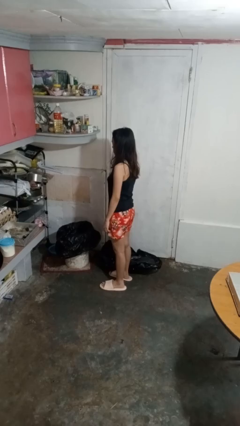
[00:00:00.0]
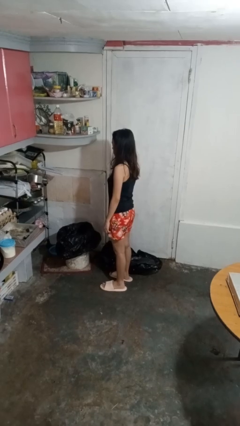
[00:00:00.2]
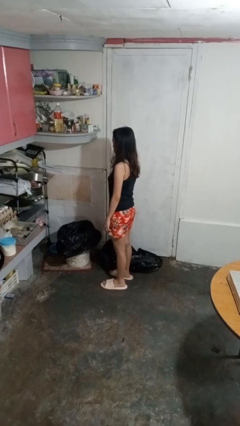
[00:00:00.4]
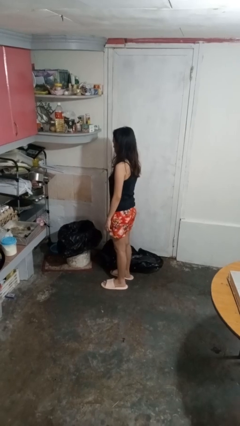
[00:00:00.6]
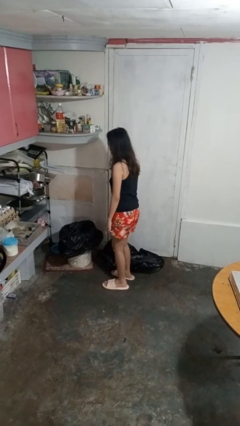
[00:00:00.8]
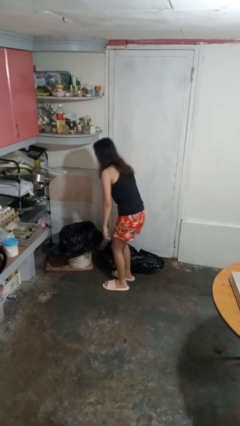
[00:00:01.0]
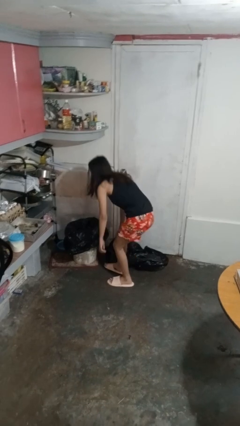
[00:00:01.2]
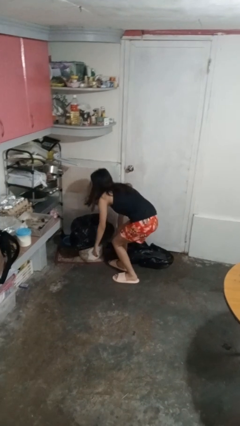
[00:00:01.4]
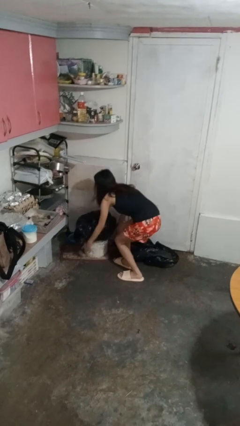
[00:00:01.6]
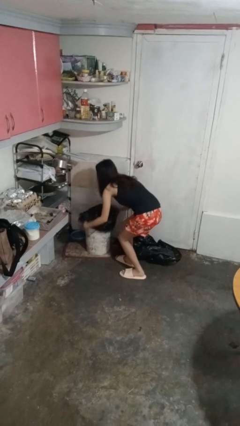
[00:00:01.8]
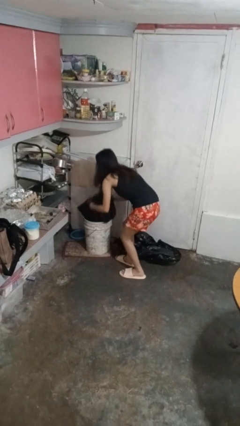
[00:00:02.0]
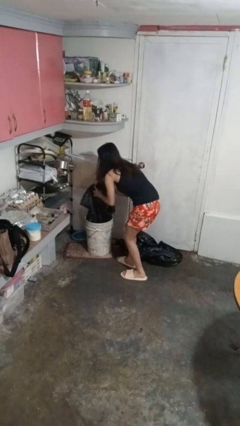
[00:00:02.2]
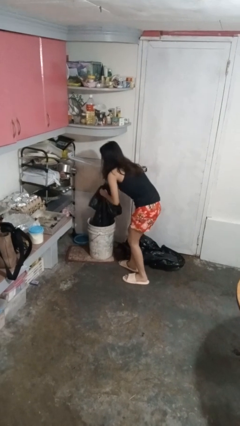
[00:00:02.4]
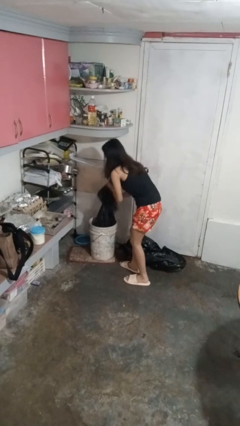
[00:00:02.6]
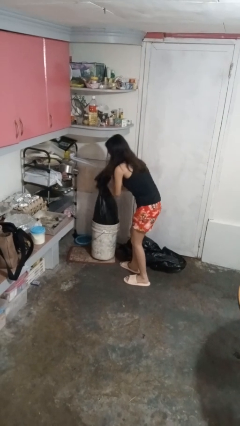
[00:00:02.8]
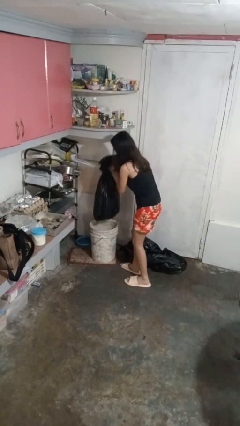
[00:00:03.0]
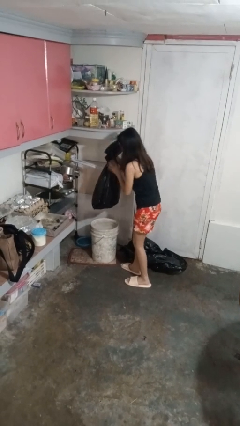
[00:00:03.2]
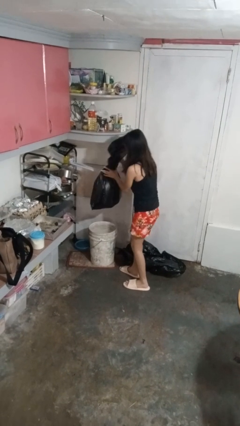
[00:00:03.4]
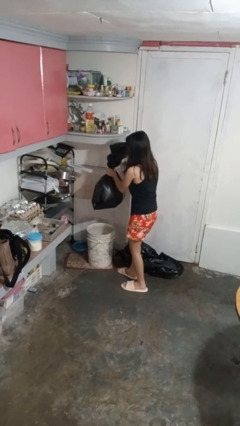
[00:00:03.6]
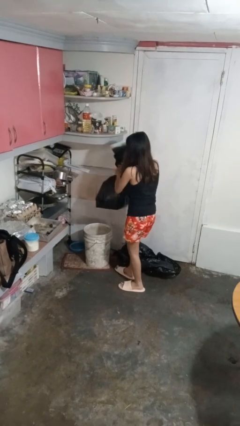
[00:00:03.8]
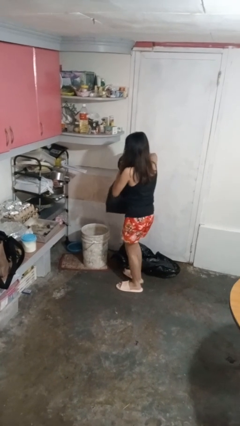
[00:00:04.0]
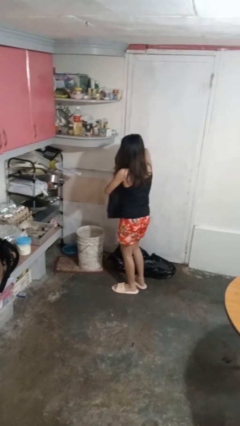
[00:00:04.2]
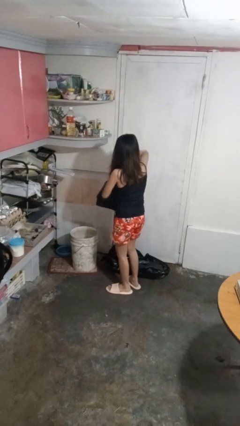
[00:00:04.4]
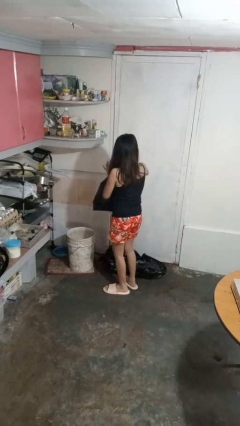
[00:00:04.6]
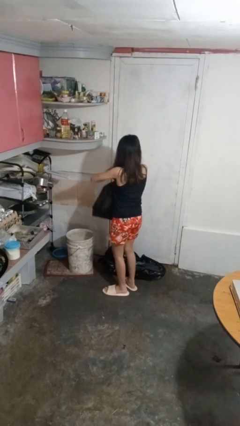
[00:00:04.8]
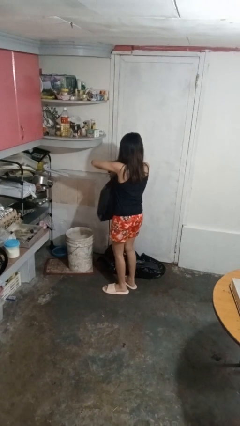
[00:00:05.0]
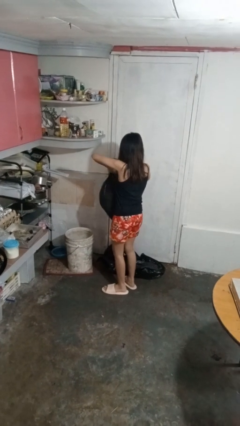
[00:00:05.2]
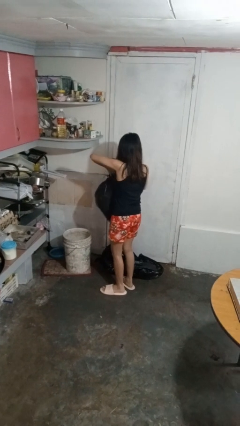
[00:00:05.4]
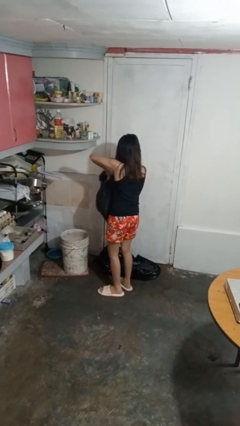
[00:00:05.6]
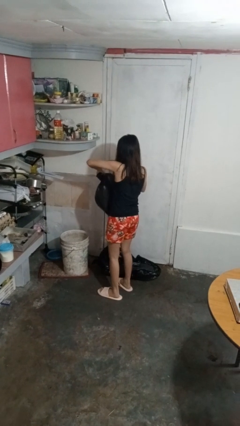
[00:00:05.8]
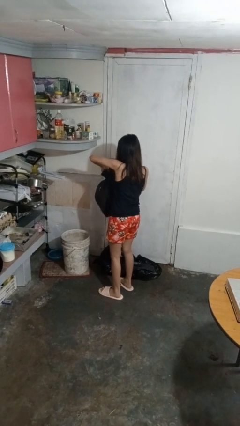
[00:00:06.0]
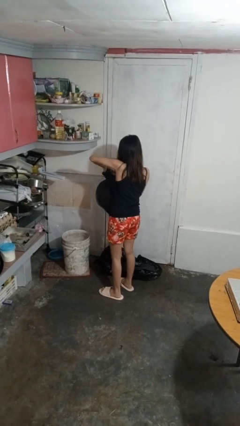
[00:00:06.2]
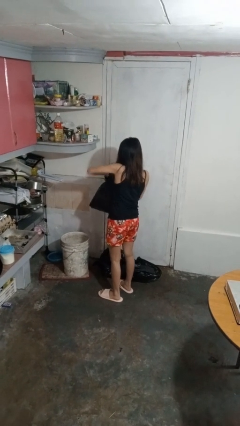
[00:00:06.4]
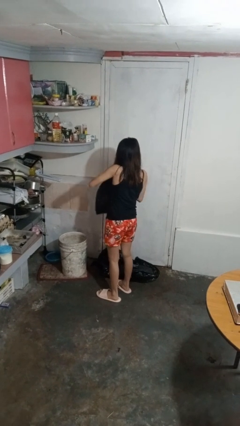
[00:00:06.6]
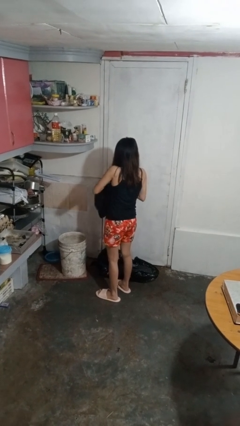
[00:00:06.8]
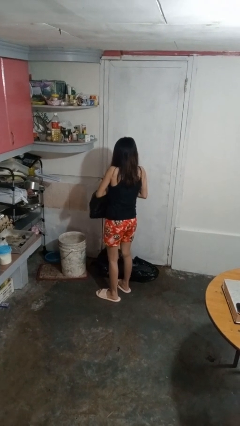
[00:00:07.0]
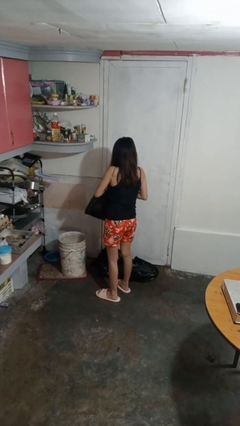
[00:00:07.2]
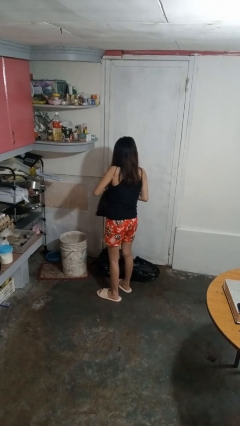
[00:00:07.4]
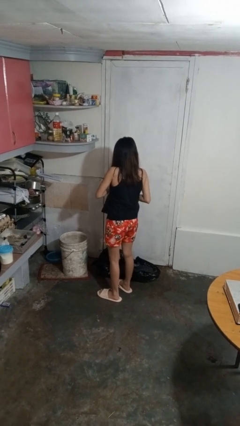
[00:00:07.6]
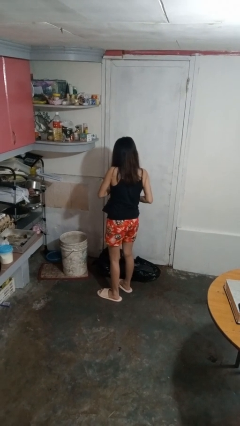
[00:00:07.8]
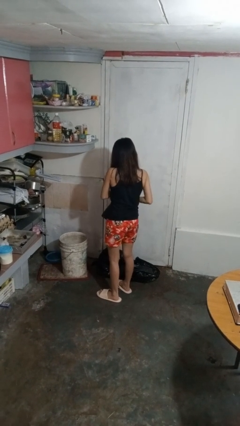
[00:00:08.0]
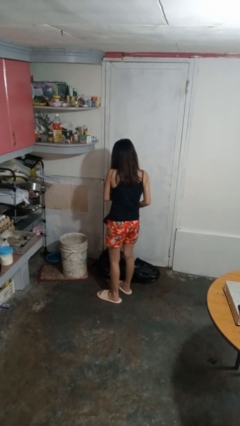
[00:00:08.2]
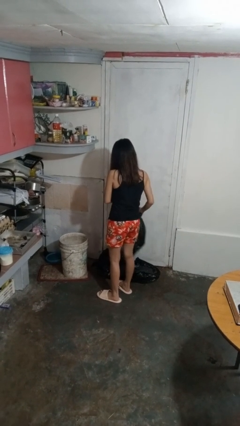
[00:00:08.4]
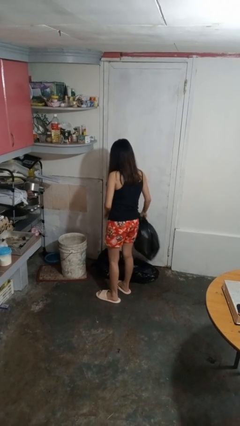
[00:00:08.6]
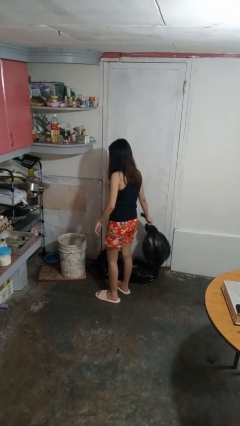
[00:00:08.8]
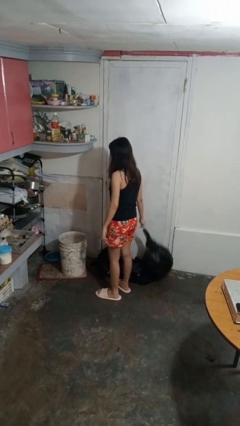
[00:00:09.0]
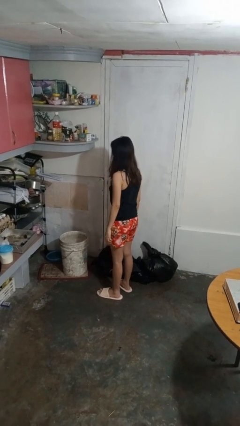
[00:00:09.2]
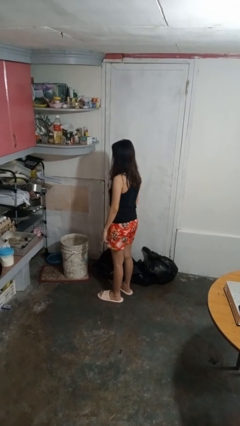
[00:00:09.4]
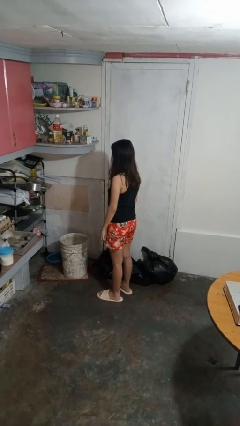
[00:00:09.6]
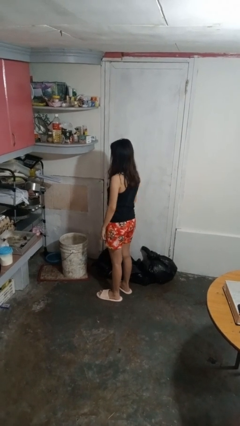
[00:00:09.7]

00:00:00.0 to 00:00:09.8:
person removes trashbag from trashcan

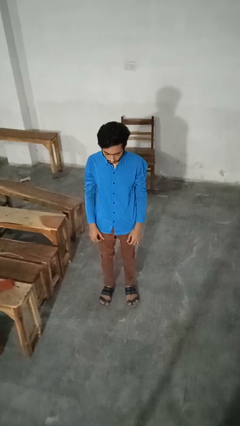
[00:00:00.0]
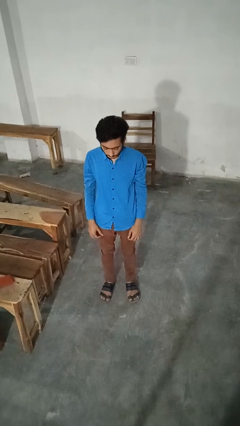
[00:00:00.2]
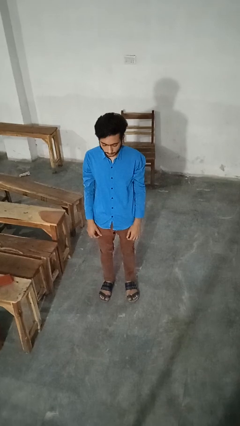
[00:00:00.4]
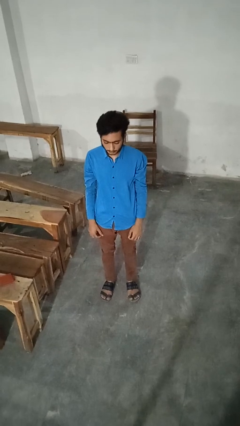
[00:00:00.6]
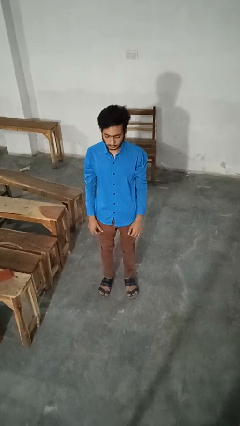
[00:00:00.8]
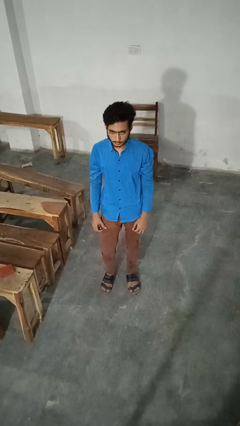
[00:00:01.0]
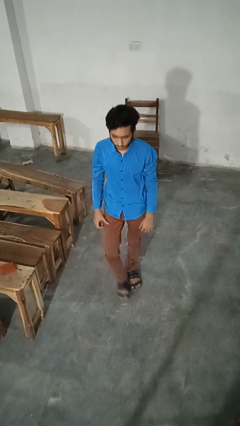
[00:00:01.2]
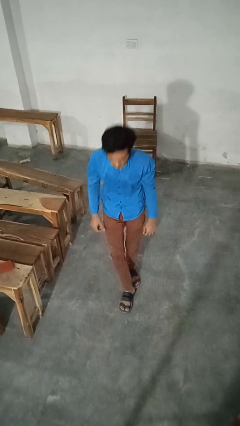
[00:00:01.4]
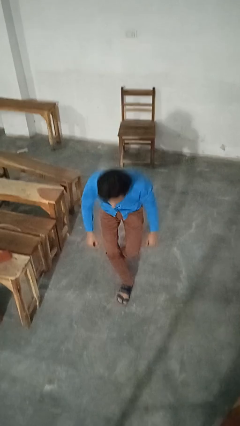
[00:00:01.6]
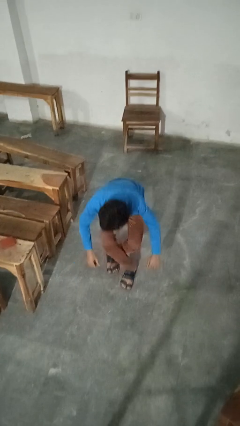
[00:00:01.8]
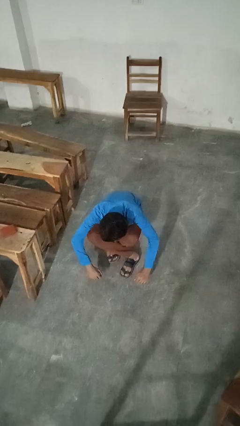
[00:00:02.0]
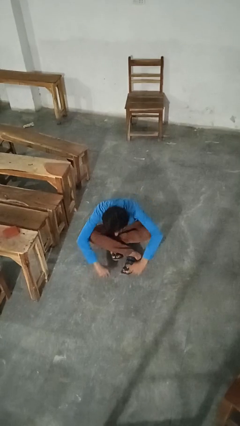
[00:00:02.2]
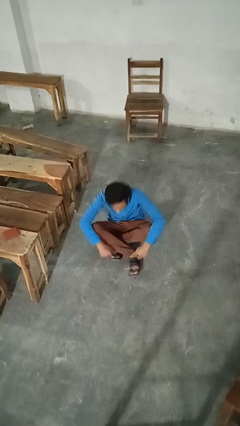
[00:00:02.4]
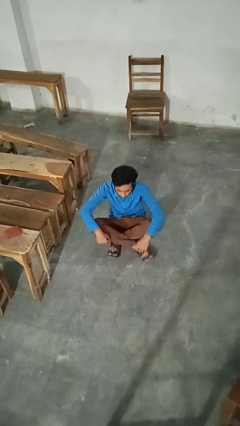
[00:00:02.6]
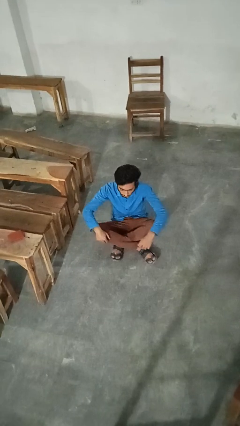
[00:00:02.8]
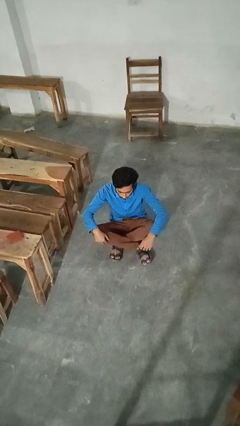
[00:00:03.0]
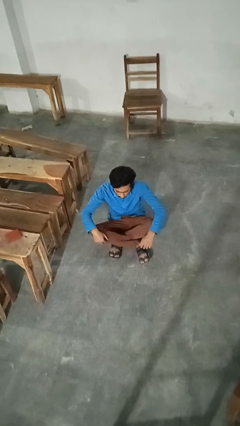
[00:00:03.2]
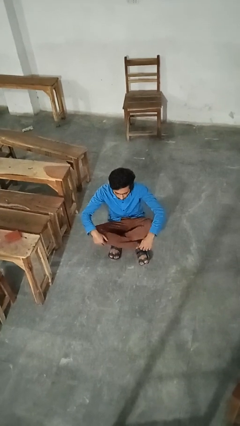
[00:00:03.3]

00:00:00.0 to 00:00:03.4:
person sits crisscross

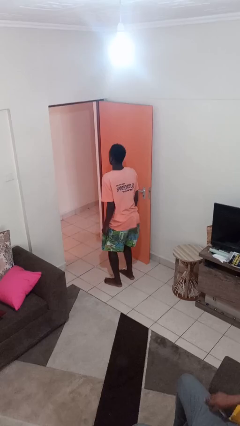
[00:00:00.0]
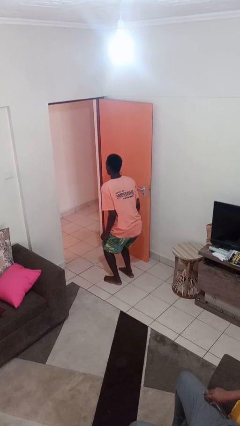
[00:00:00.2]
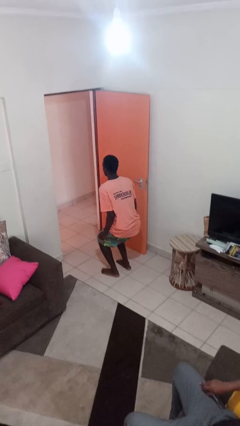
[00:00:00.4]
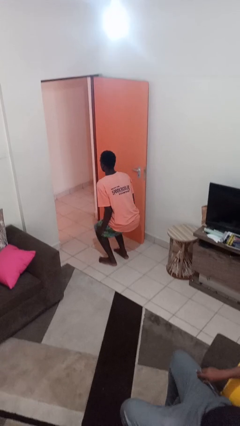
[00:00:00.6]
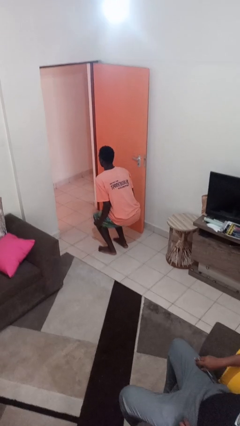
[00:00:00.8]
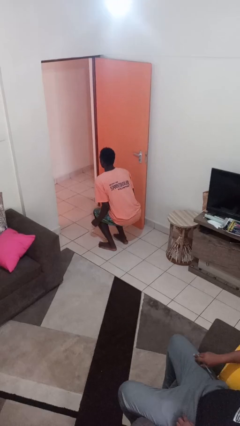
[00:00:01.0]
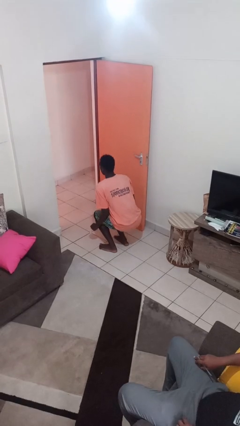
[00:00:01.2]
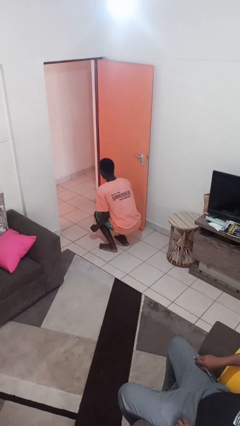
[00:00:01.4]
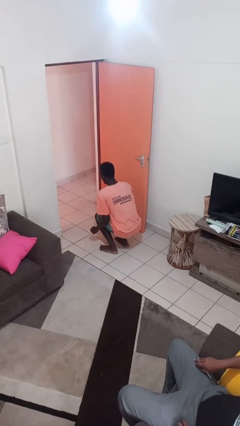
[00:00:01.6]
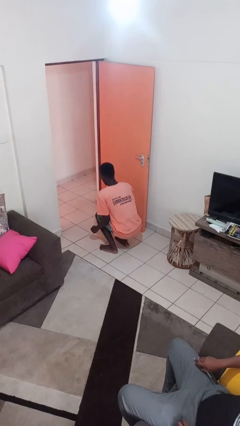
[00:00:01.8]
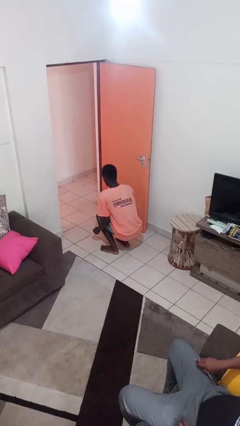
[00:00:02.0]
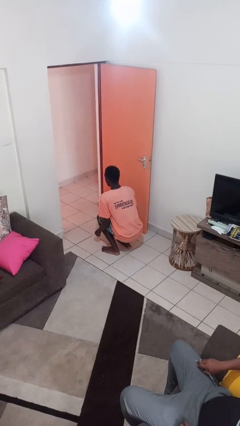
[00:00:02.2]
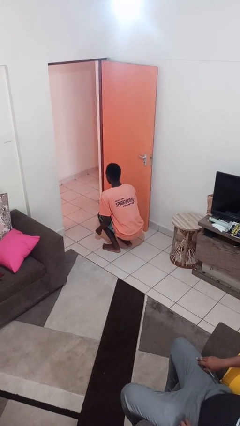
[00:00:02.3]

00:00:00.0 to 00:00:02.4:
person squats

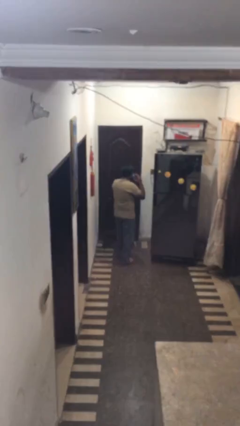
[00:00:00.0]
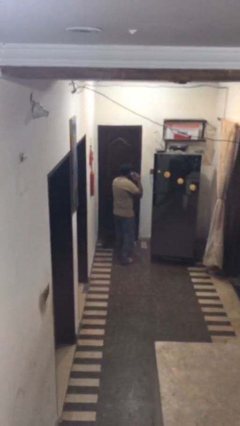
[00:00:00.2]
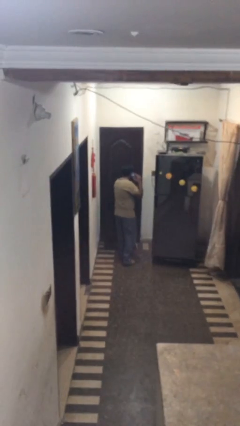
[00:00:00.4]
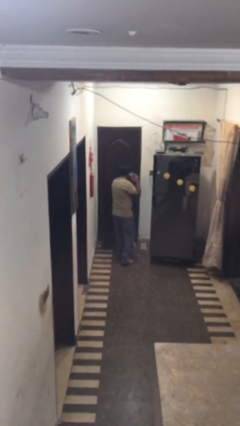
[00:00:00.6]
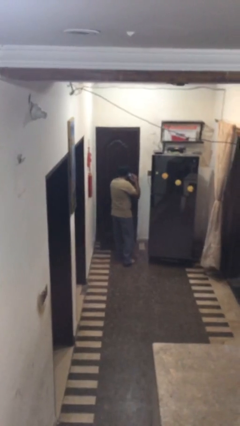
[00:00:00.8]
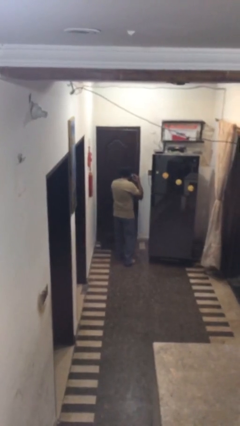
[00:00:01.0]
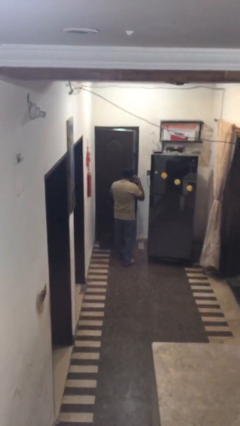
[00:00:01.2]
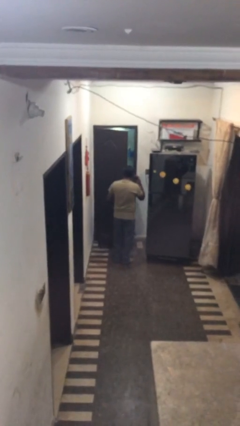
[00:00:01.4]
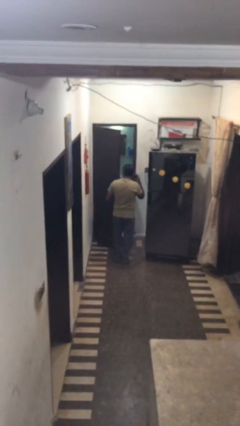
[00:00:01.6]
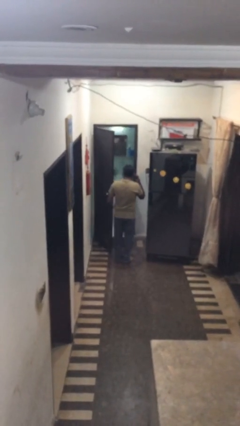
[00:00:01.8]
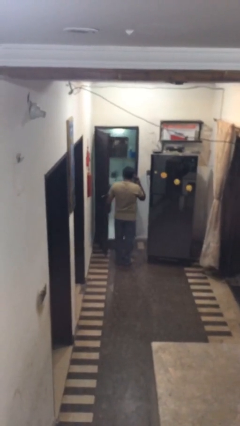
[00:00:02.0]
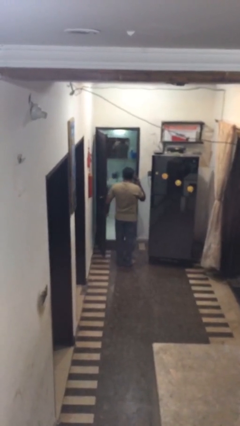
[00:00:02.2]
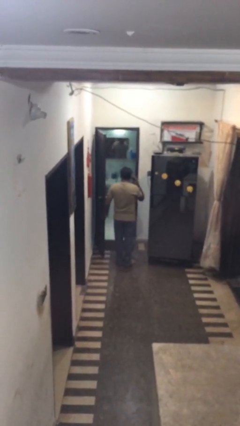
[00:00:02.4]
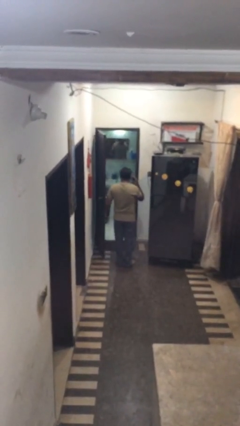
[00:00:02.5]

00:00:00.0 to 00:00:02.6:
person opens facility door
